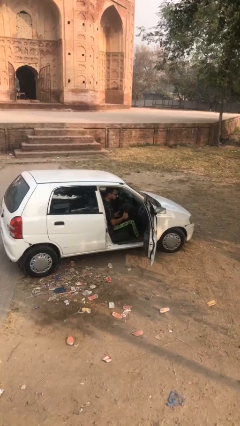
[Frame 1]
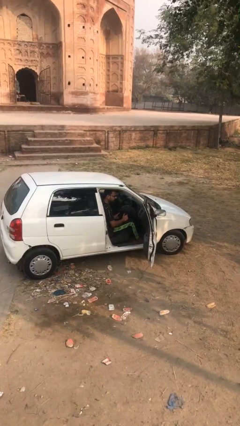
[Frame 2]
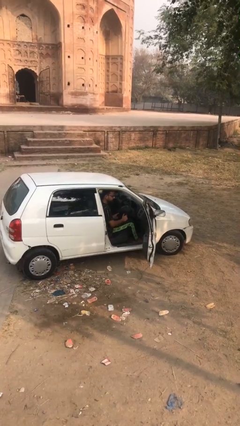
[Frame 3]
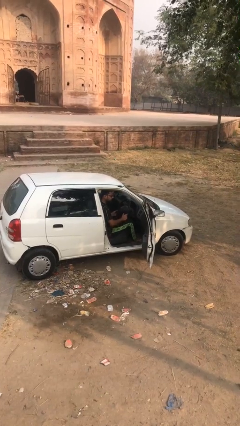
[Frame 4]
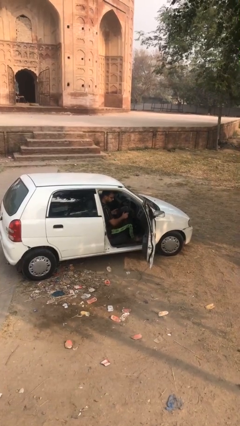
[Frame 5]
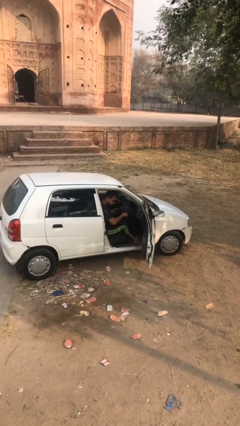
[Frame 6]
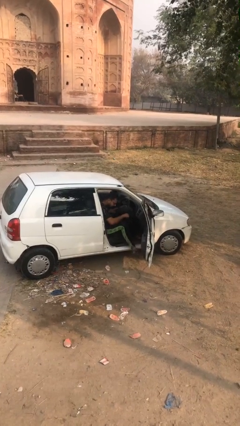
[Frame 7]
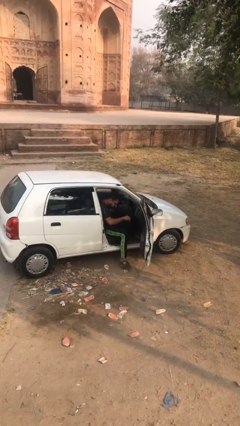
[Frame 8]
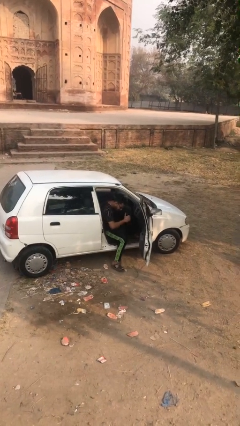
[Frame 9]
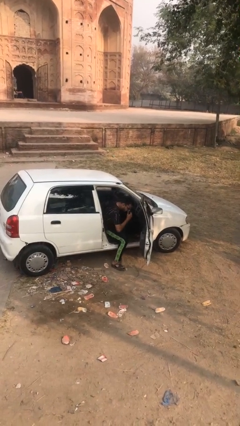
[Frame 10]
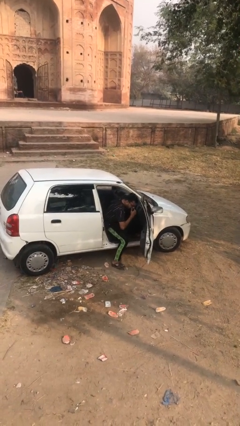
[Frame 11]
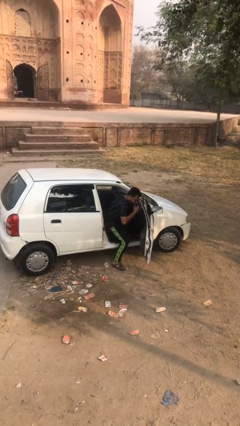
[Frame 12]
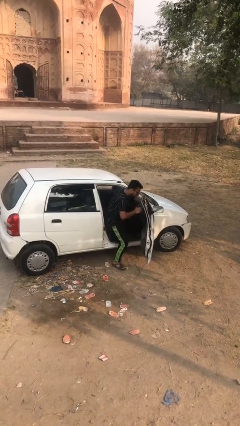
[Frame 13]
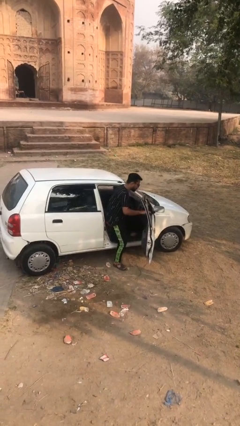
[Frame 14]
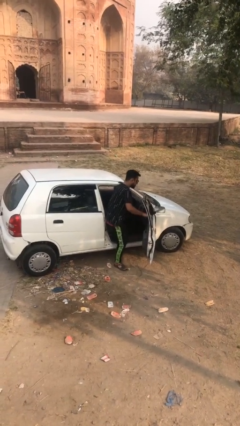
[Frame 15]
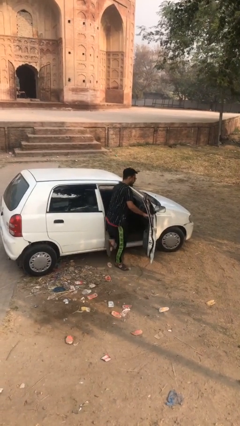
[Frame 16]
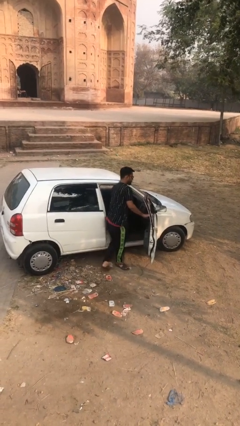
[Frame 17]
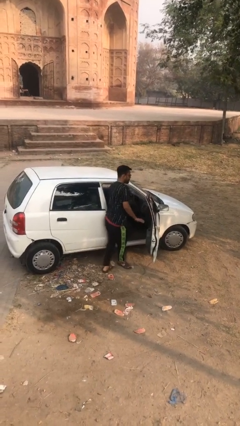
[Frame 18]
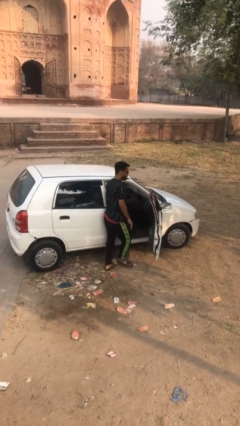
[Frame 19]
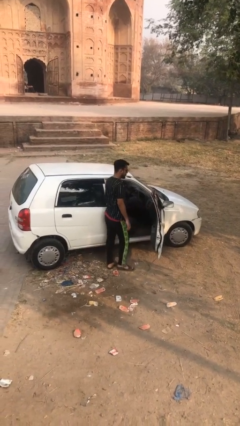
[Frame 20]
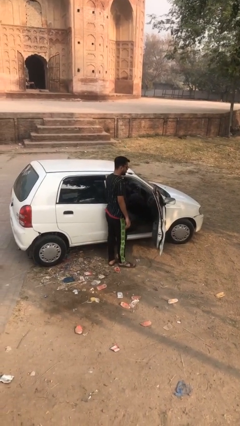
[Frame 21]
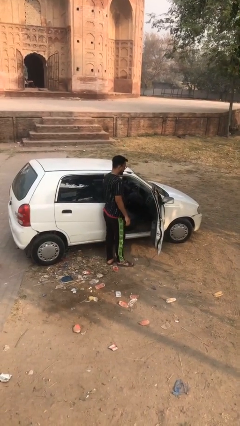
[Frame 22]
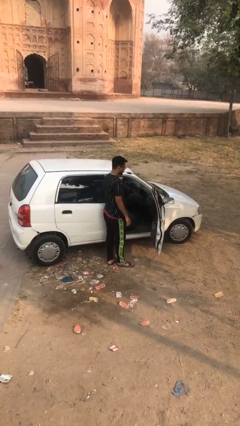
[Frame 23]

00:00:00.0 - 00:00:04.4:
person exits car

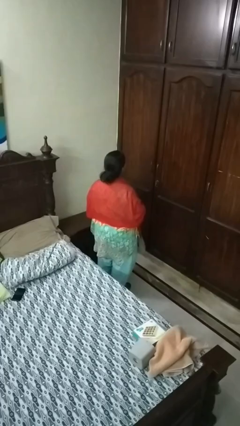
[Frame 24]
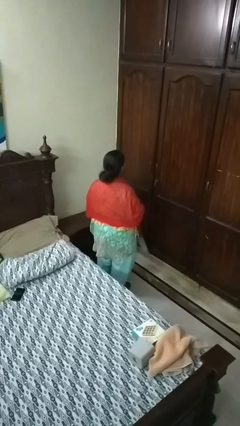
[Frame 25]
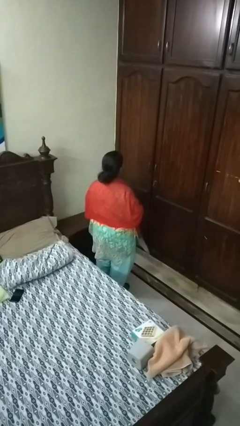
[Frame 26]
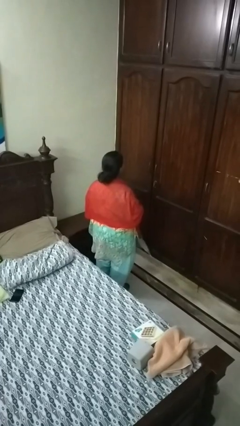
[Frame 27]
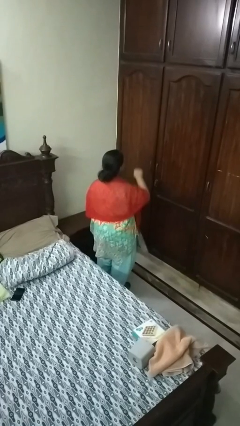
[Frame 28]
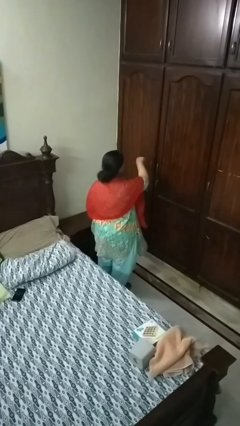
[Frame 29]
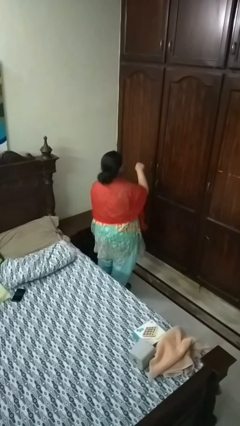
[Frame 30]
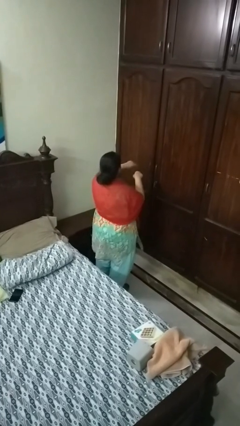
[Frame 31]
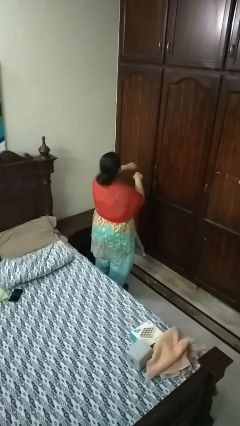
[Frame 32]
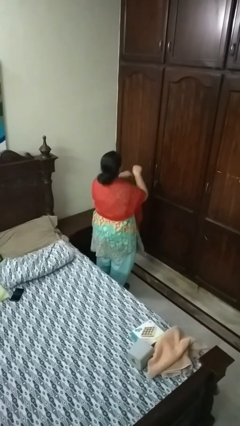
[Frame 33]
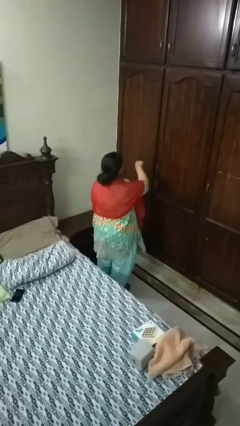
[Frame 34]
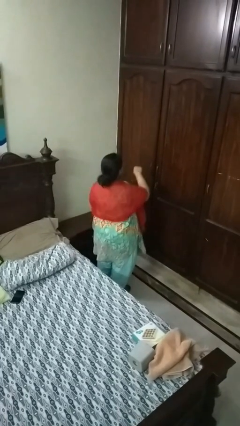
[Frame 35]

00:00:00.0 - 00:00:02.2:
person punches

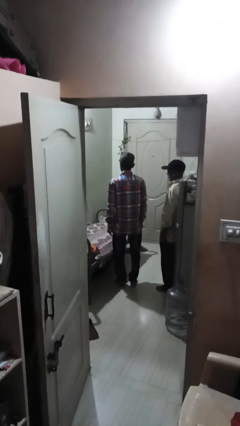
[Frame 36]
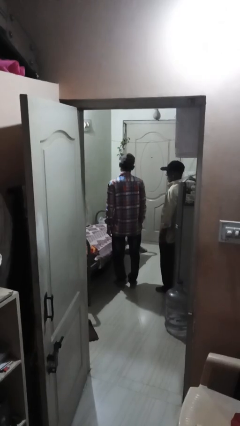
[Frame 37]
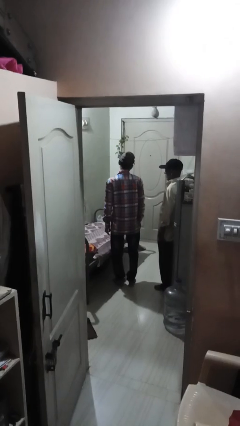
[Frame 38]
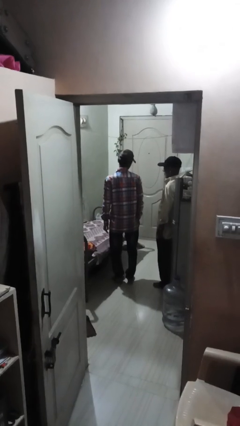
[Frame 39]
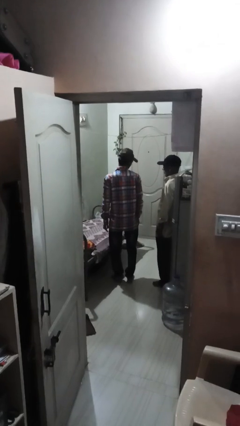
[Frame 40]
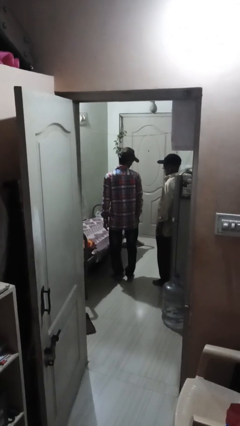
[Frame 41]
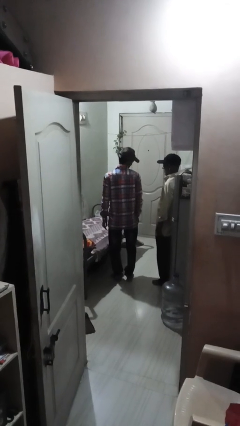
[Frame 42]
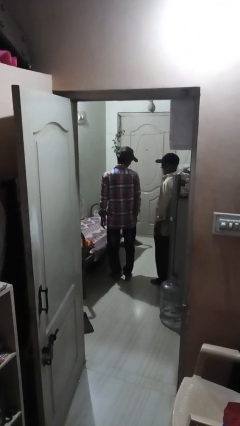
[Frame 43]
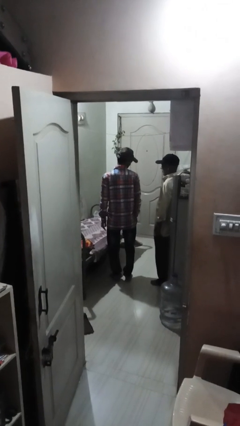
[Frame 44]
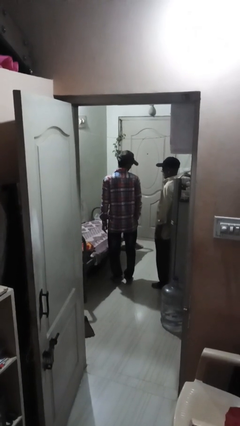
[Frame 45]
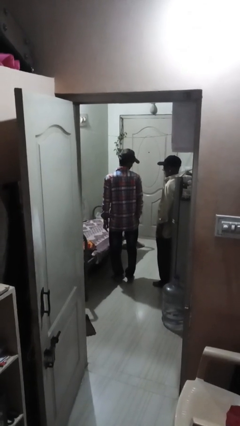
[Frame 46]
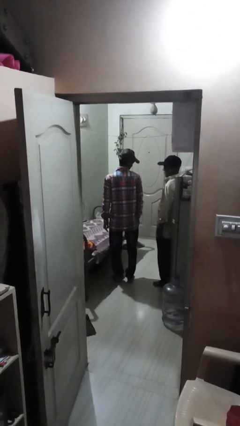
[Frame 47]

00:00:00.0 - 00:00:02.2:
person looks over shoulder

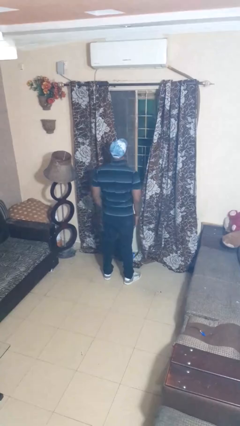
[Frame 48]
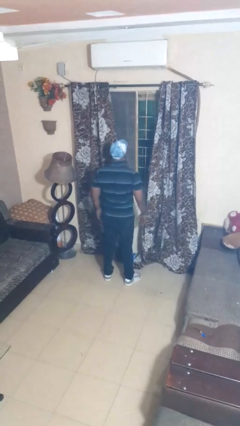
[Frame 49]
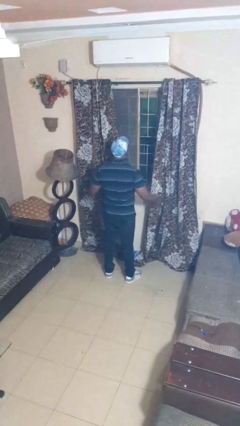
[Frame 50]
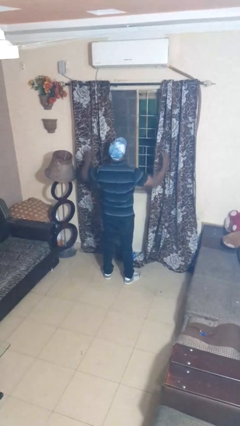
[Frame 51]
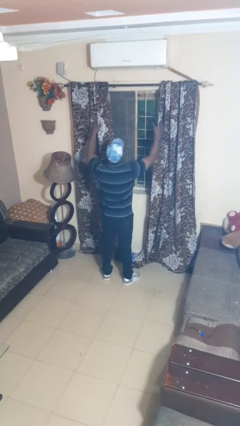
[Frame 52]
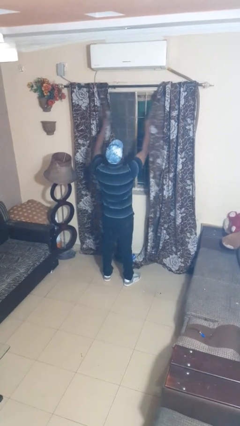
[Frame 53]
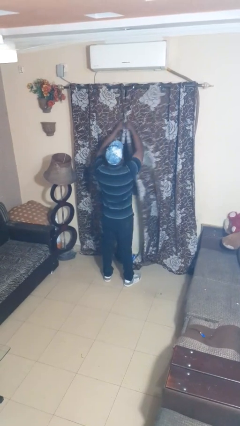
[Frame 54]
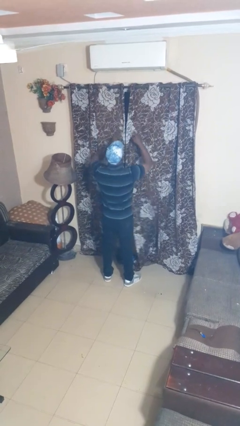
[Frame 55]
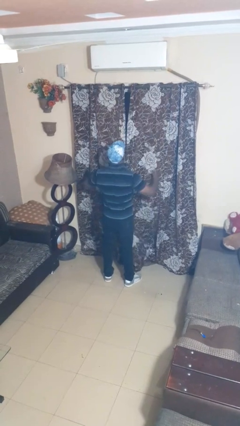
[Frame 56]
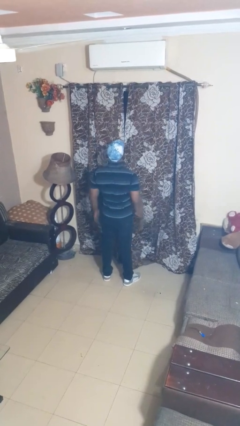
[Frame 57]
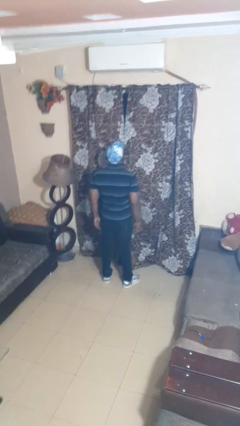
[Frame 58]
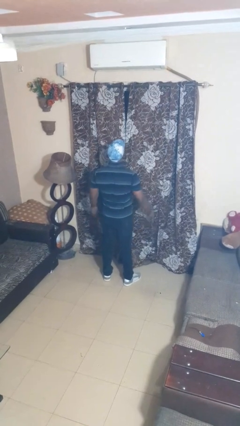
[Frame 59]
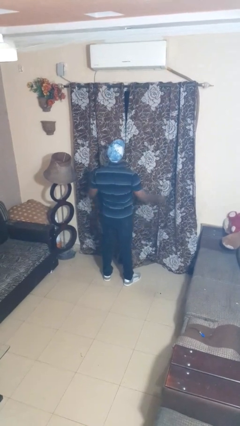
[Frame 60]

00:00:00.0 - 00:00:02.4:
person closes curtains

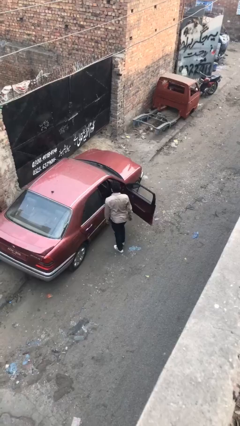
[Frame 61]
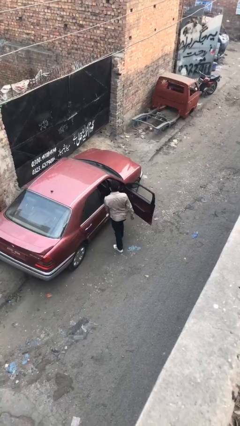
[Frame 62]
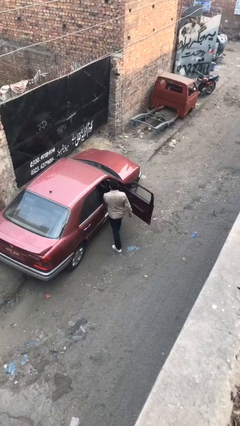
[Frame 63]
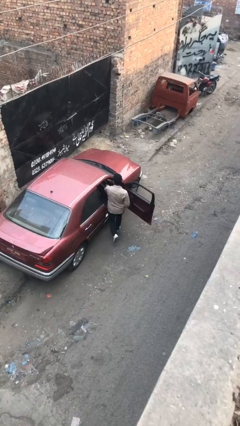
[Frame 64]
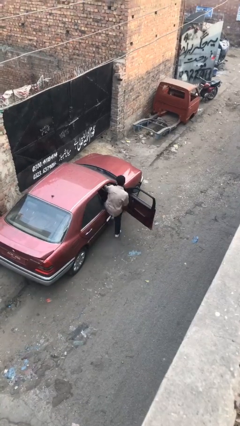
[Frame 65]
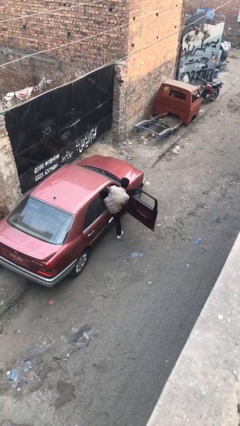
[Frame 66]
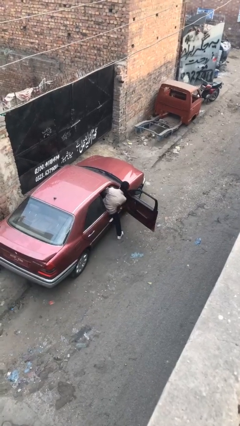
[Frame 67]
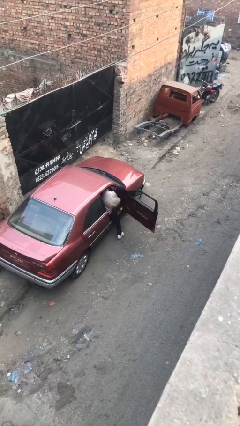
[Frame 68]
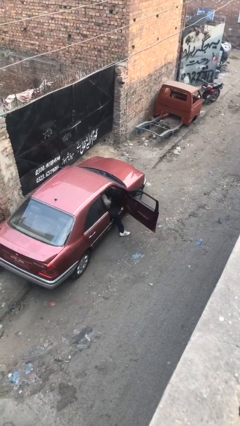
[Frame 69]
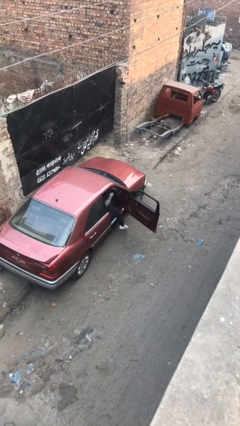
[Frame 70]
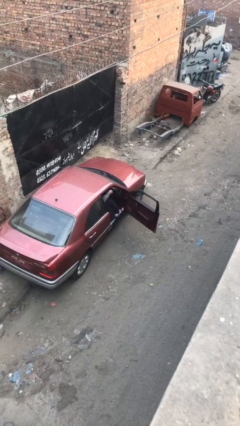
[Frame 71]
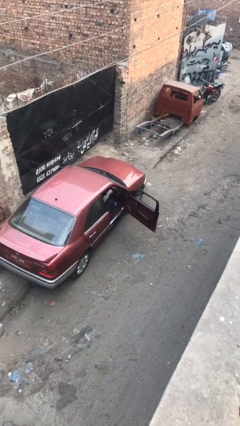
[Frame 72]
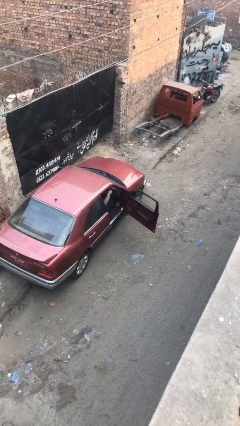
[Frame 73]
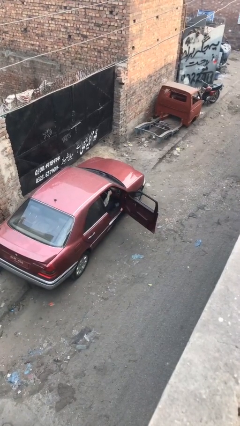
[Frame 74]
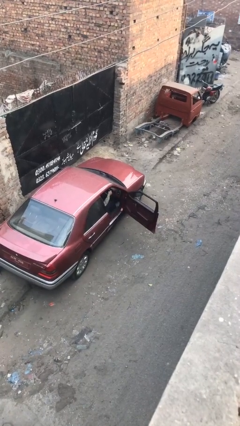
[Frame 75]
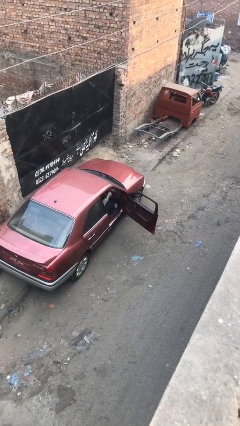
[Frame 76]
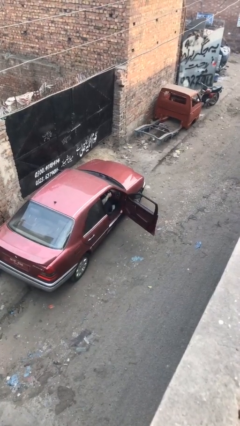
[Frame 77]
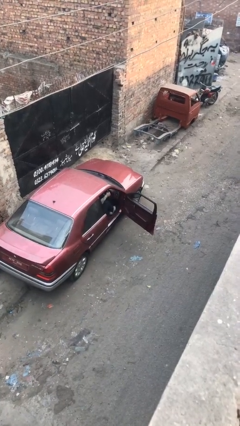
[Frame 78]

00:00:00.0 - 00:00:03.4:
person enters car

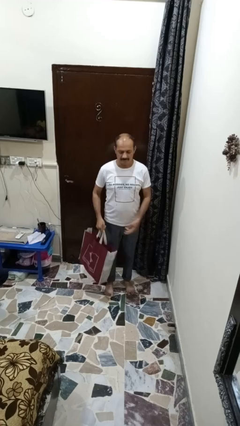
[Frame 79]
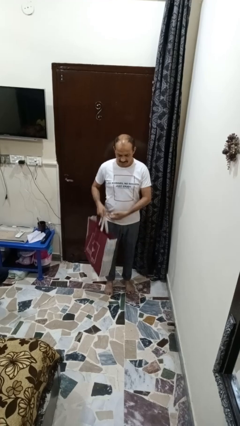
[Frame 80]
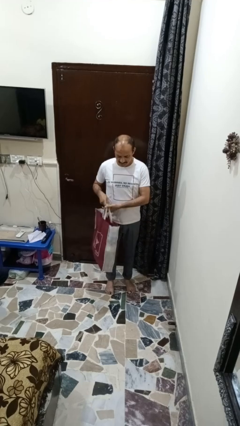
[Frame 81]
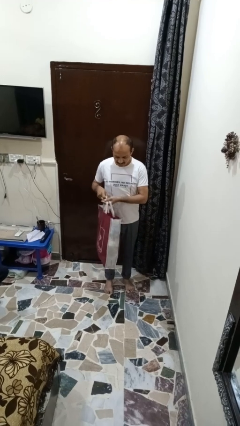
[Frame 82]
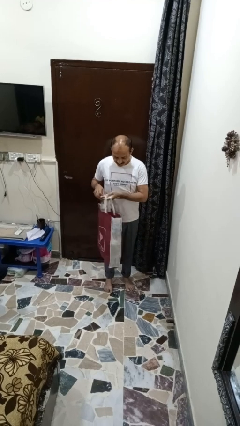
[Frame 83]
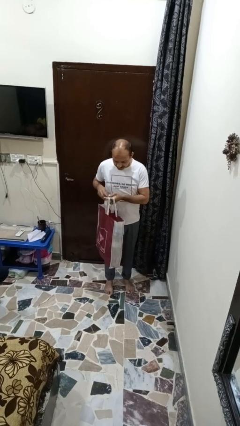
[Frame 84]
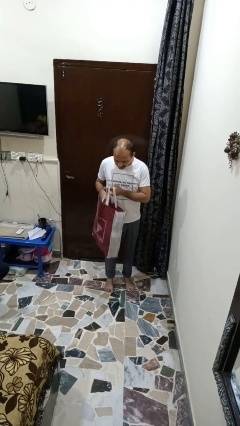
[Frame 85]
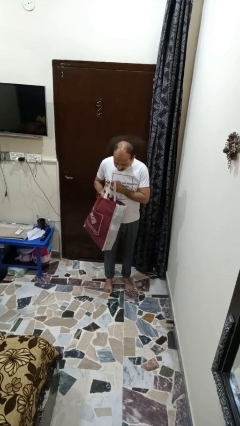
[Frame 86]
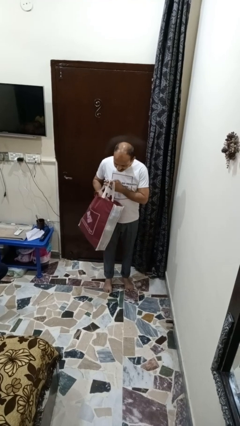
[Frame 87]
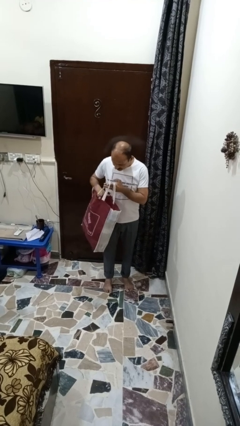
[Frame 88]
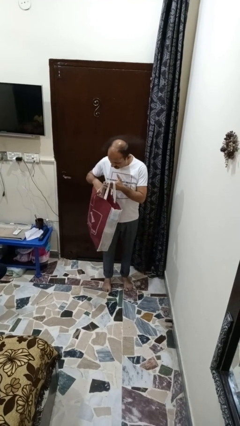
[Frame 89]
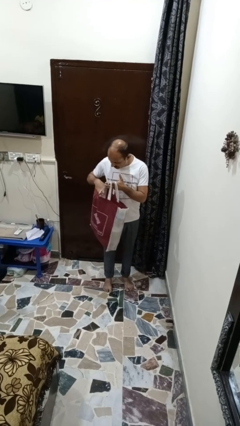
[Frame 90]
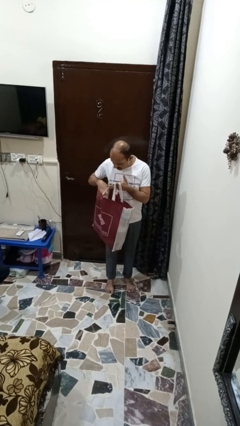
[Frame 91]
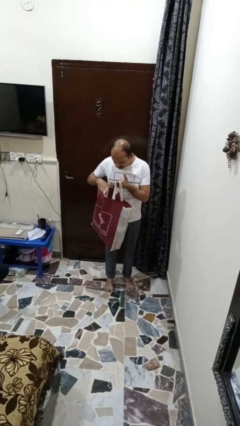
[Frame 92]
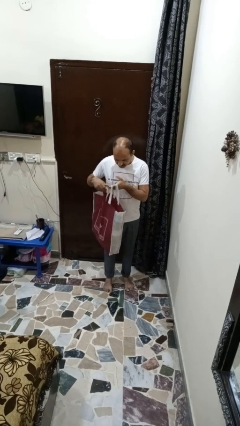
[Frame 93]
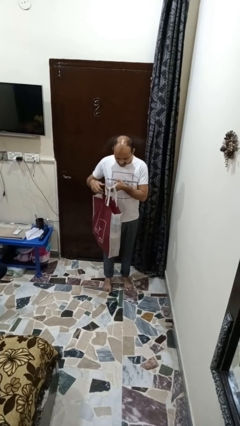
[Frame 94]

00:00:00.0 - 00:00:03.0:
person searches in bag
